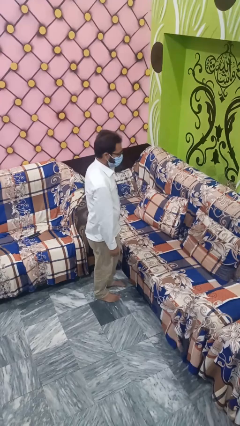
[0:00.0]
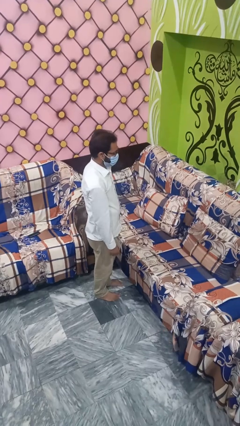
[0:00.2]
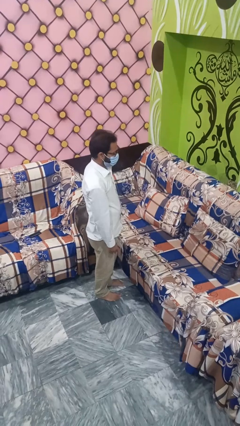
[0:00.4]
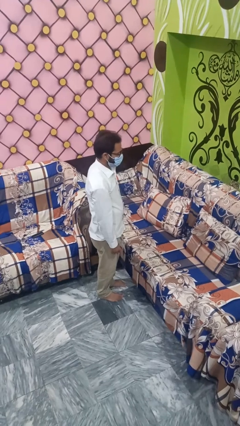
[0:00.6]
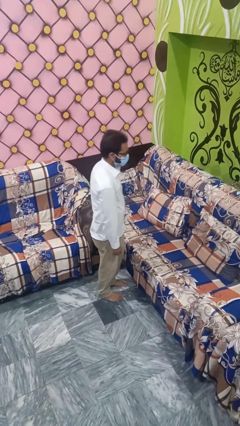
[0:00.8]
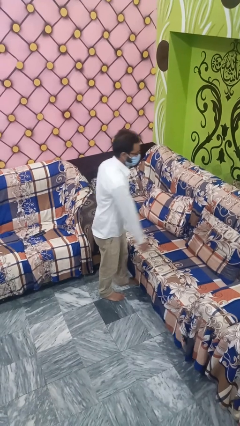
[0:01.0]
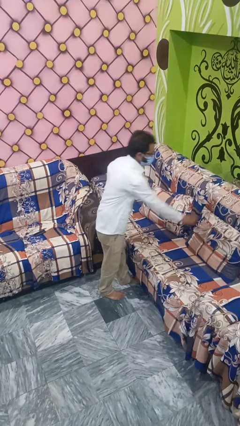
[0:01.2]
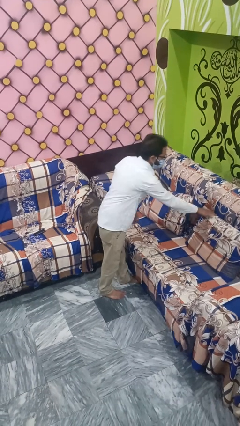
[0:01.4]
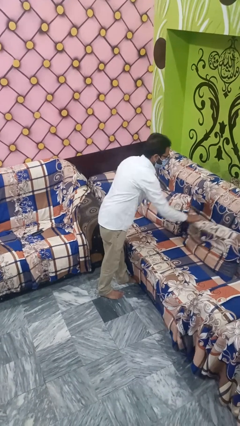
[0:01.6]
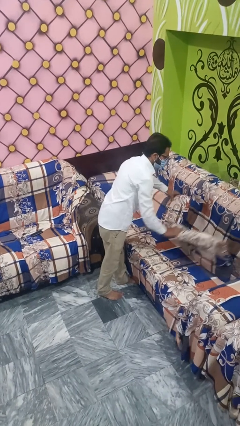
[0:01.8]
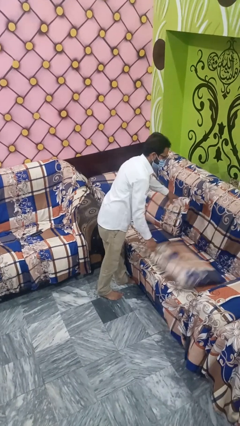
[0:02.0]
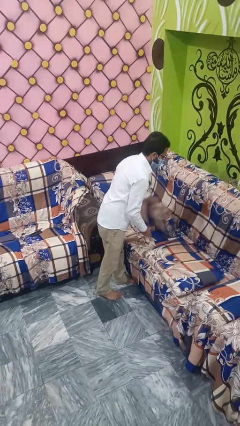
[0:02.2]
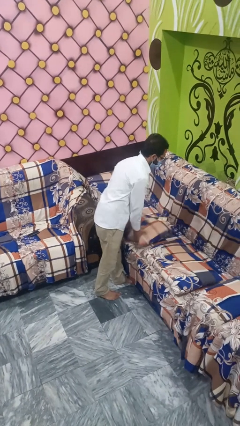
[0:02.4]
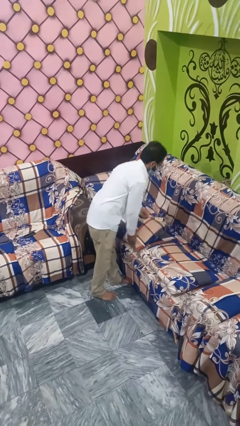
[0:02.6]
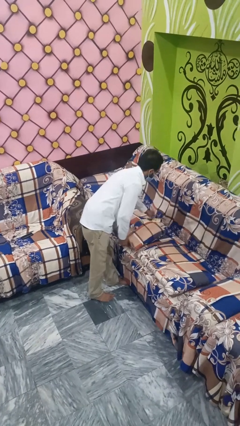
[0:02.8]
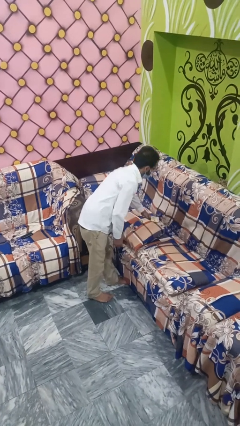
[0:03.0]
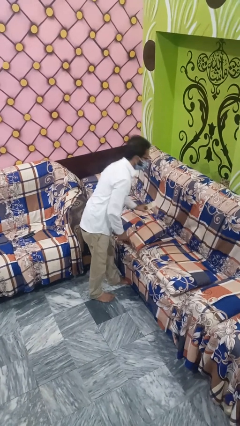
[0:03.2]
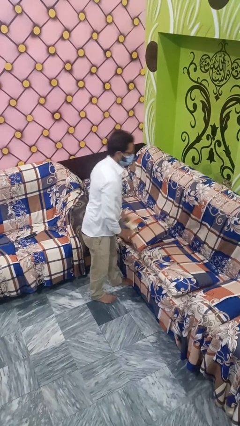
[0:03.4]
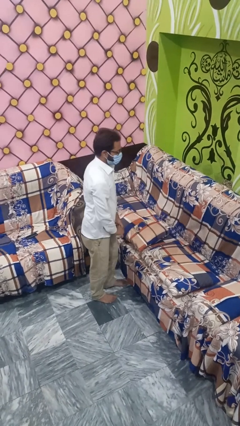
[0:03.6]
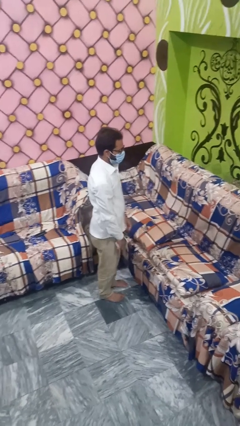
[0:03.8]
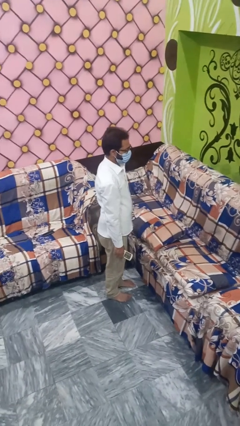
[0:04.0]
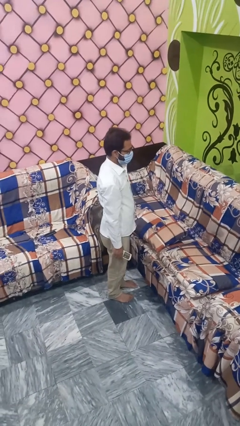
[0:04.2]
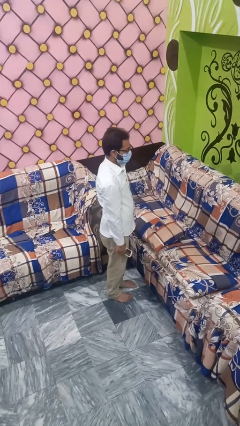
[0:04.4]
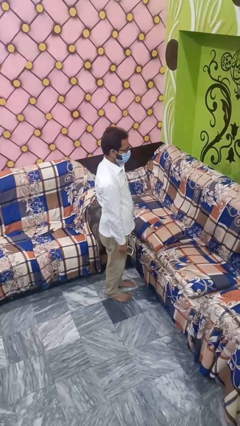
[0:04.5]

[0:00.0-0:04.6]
person searches in couch

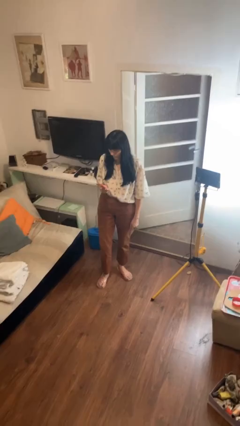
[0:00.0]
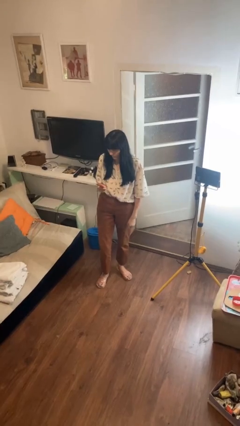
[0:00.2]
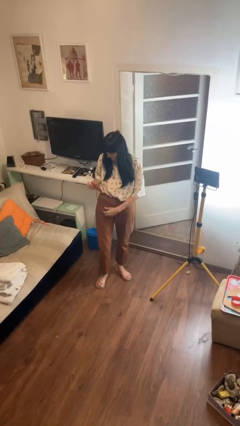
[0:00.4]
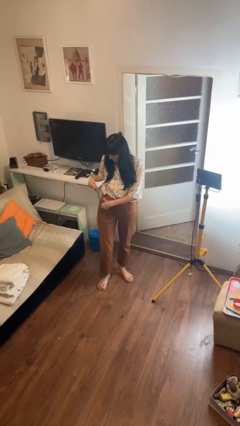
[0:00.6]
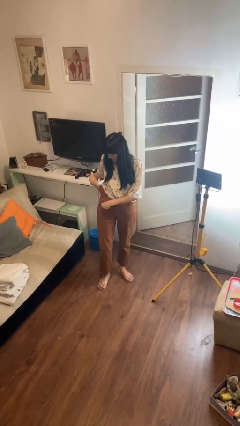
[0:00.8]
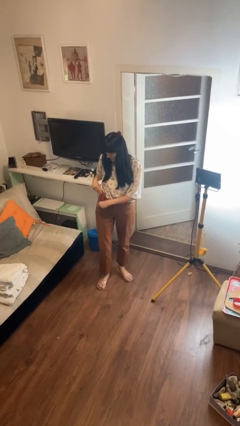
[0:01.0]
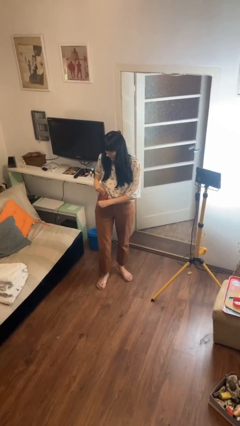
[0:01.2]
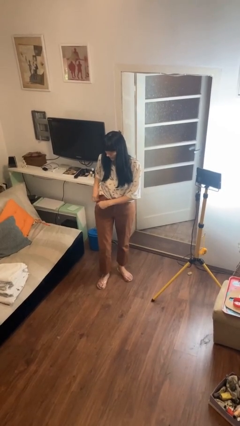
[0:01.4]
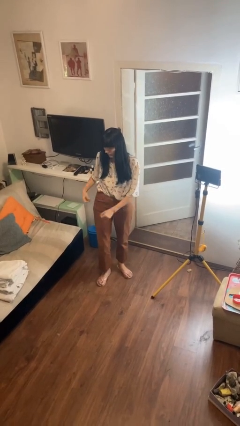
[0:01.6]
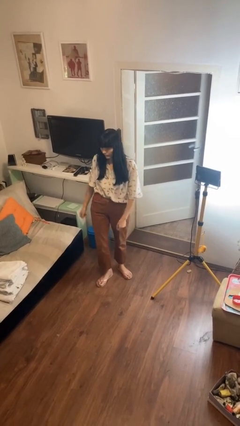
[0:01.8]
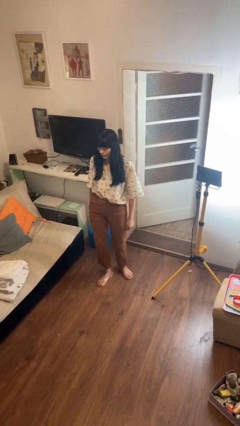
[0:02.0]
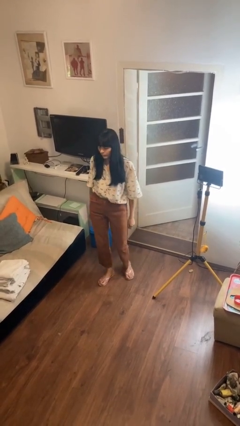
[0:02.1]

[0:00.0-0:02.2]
person puts phone into pocket

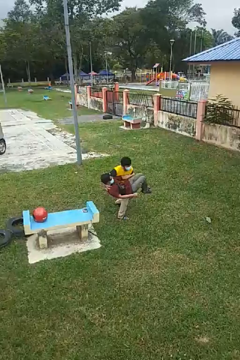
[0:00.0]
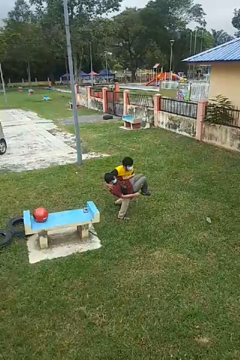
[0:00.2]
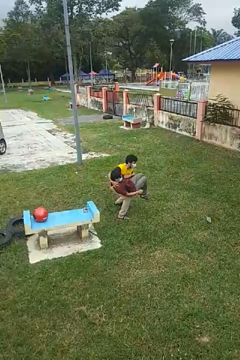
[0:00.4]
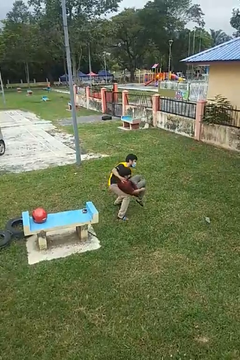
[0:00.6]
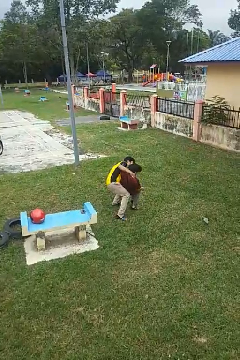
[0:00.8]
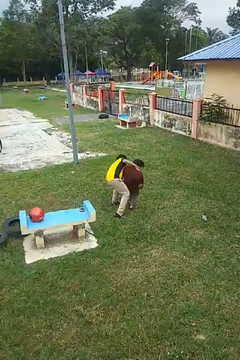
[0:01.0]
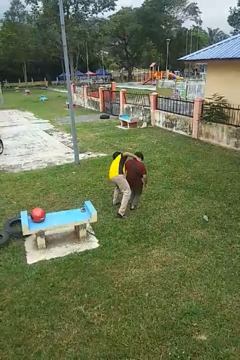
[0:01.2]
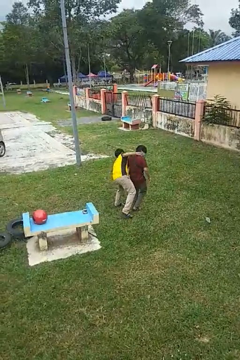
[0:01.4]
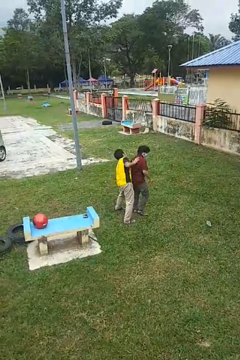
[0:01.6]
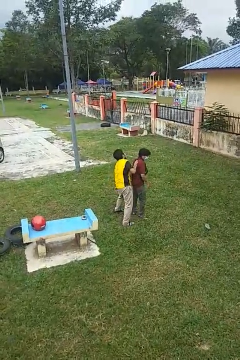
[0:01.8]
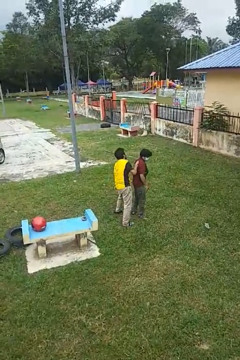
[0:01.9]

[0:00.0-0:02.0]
person puts down person

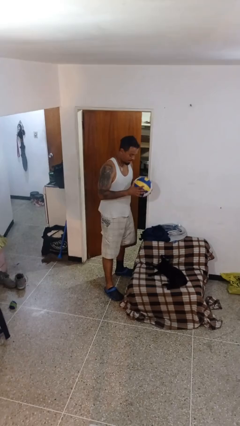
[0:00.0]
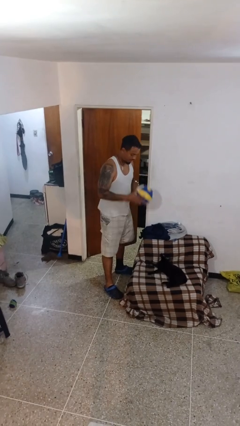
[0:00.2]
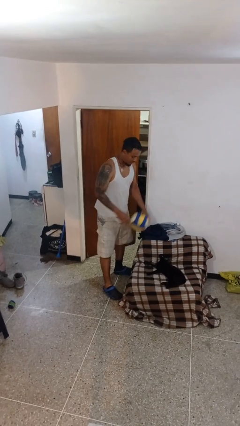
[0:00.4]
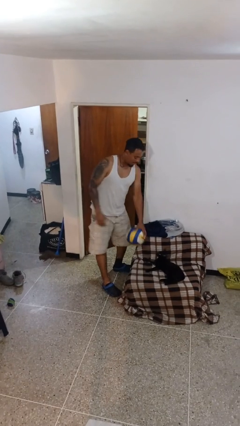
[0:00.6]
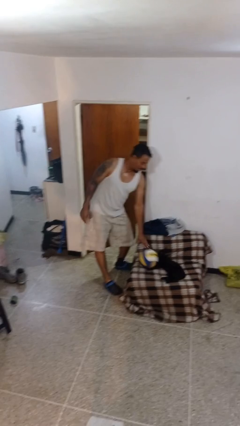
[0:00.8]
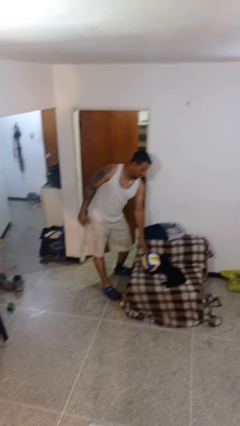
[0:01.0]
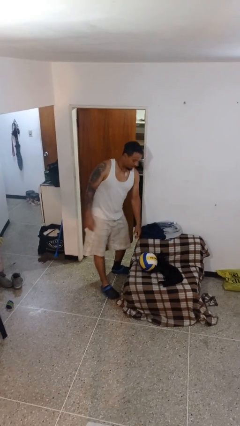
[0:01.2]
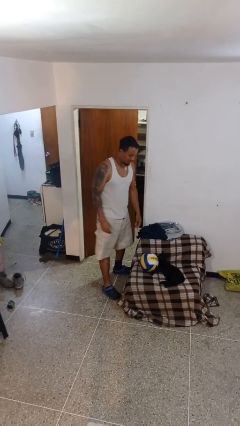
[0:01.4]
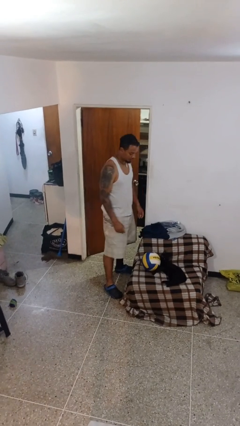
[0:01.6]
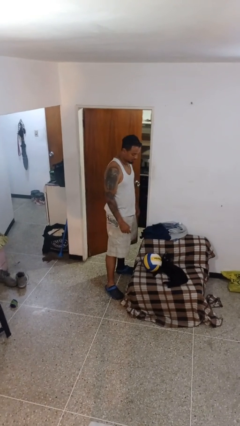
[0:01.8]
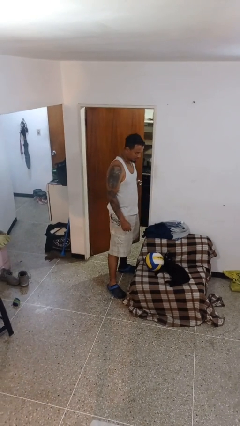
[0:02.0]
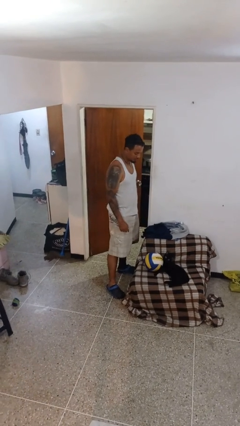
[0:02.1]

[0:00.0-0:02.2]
person puts down object on couch

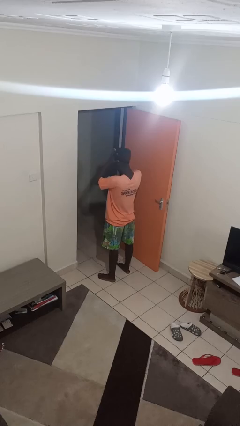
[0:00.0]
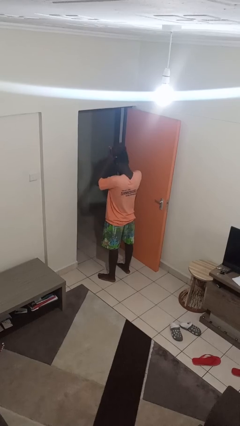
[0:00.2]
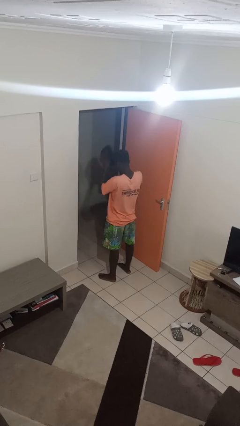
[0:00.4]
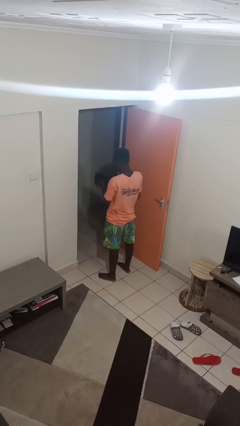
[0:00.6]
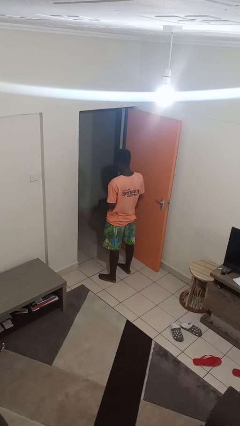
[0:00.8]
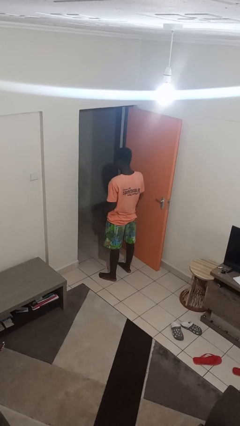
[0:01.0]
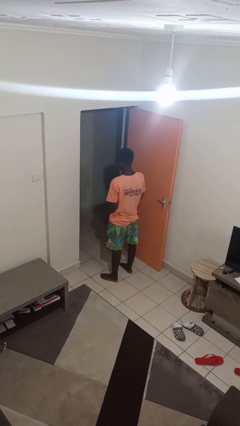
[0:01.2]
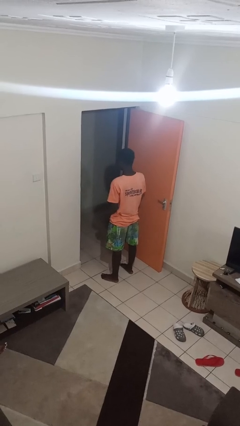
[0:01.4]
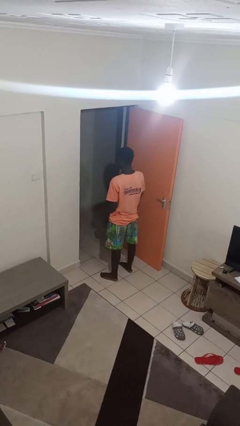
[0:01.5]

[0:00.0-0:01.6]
person takes off hat

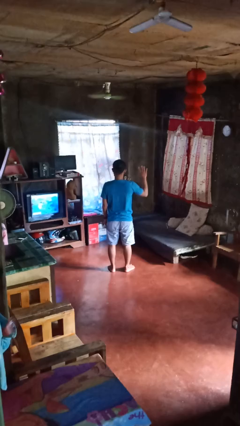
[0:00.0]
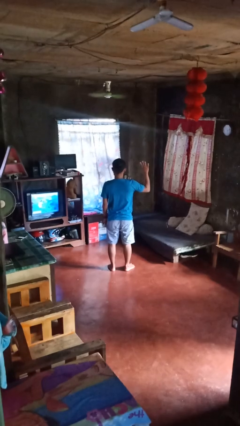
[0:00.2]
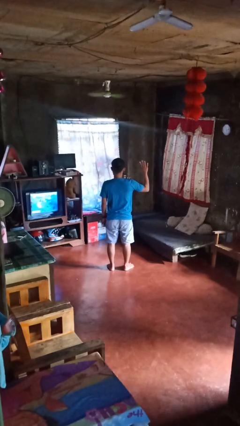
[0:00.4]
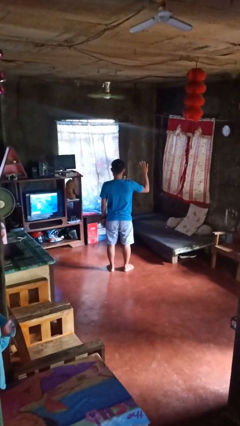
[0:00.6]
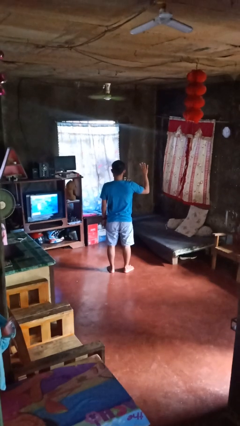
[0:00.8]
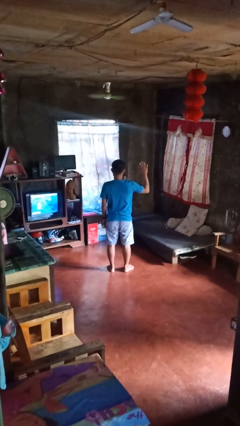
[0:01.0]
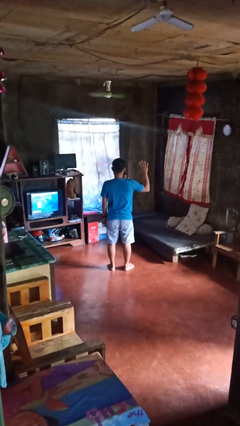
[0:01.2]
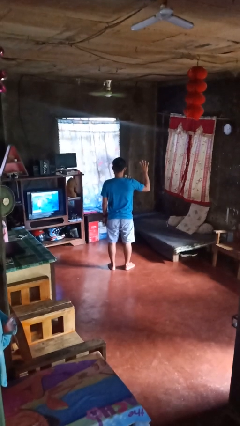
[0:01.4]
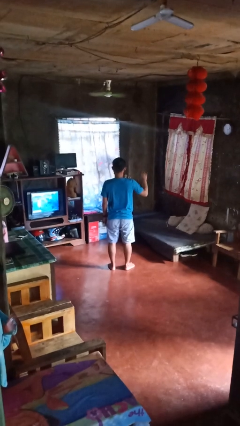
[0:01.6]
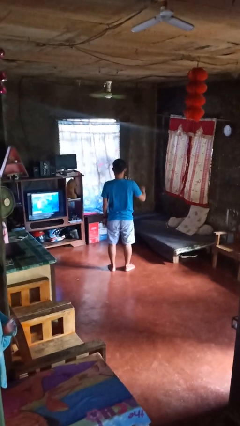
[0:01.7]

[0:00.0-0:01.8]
person gestures number four

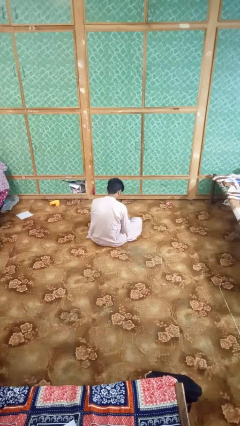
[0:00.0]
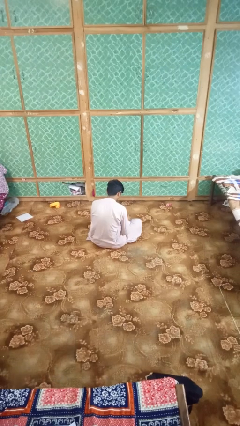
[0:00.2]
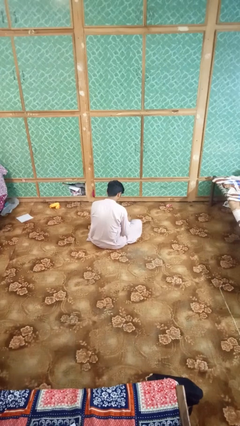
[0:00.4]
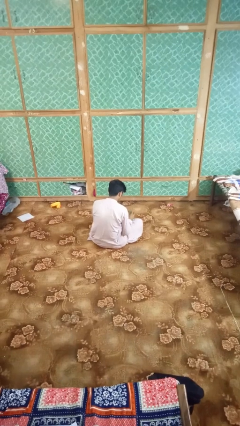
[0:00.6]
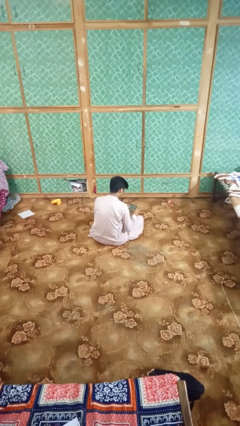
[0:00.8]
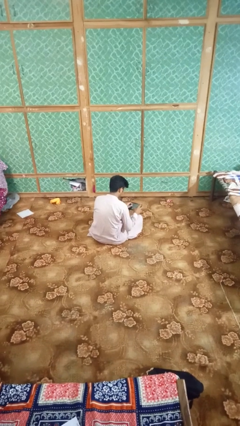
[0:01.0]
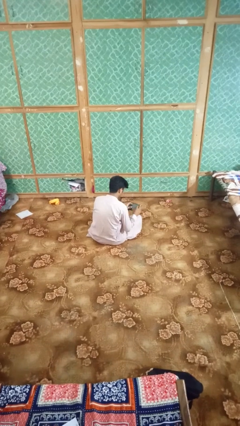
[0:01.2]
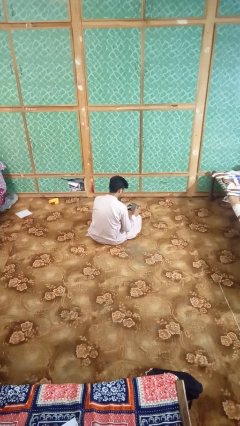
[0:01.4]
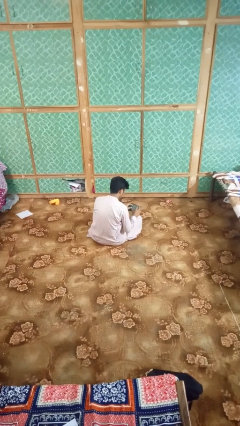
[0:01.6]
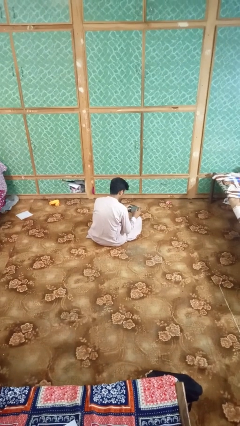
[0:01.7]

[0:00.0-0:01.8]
person interacts with tablet

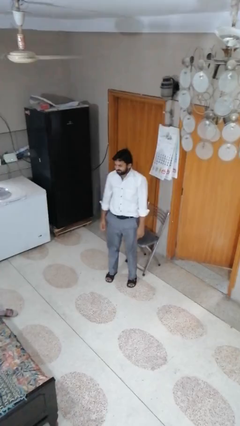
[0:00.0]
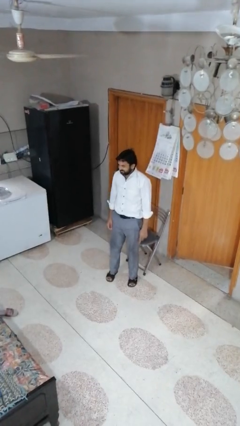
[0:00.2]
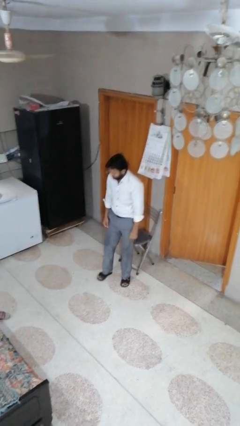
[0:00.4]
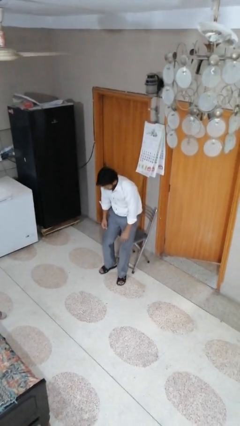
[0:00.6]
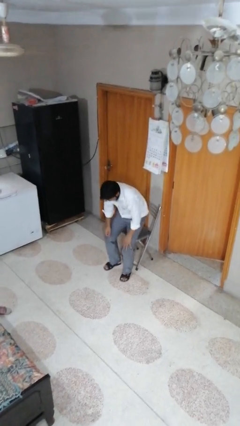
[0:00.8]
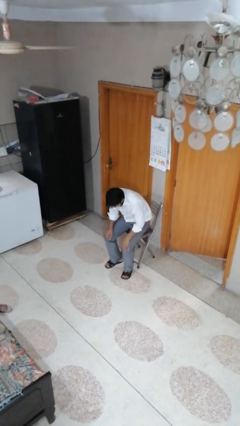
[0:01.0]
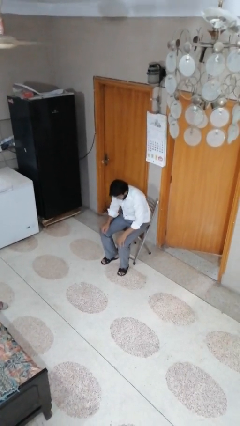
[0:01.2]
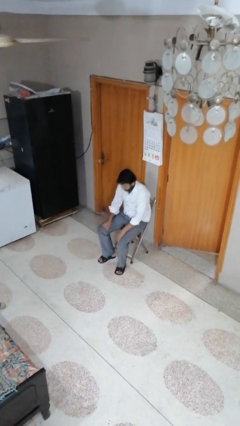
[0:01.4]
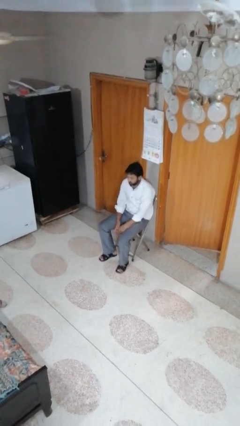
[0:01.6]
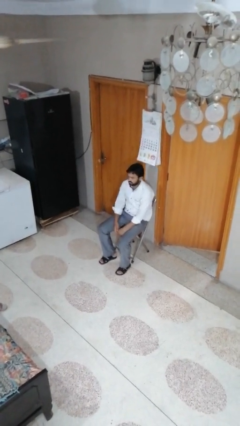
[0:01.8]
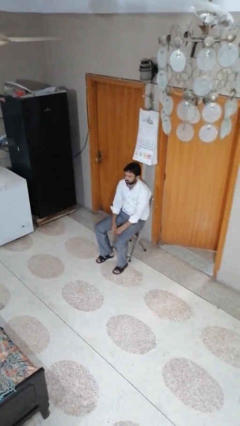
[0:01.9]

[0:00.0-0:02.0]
person sits down
